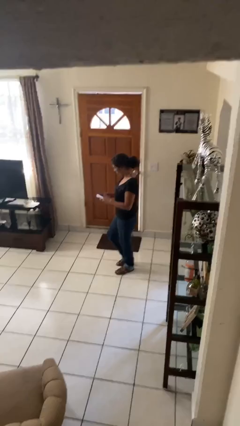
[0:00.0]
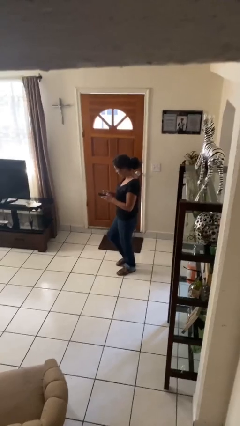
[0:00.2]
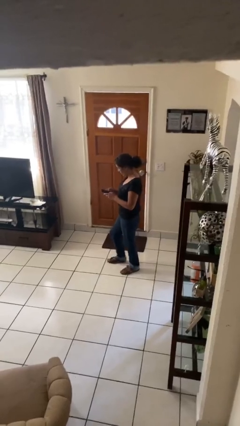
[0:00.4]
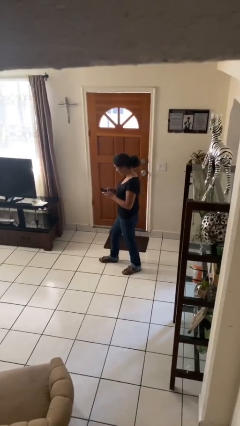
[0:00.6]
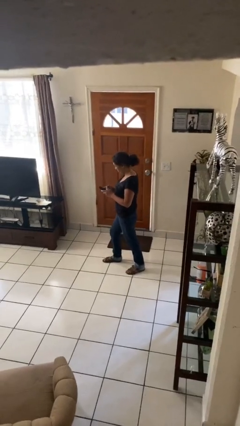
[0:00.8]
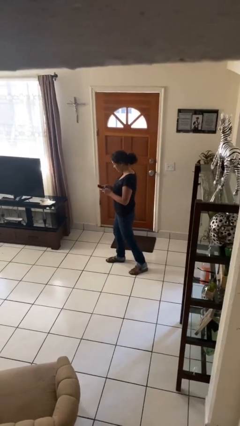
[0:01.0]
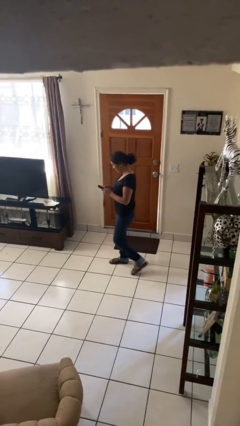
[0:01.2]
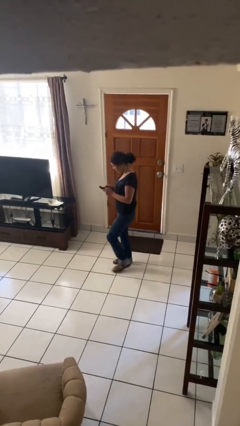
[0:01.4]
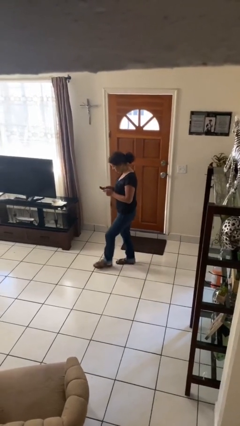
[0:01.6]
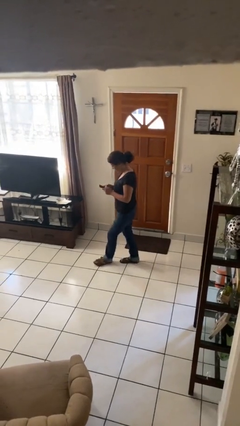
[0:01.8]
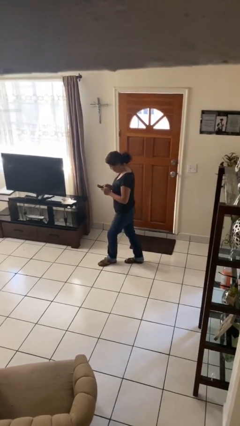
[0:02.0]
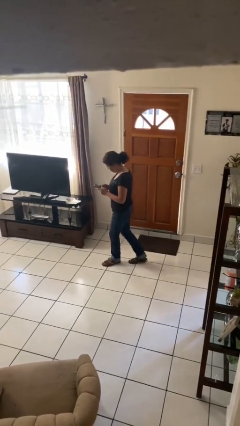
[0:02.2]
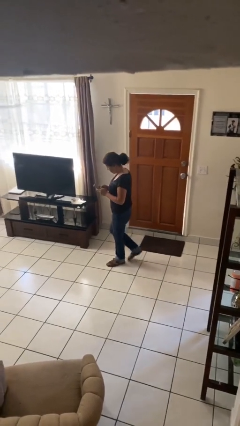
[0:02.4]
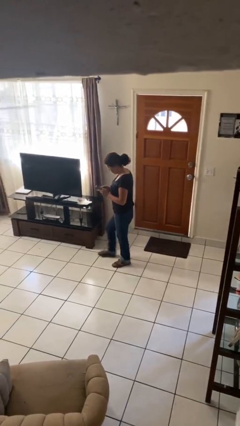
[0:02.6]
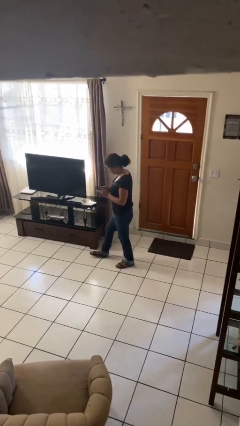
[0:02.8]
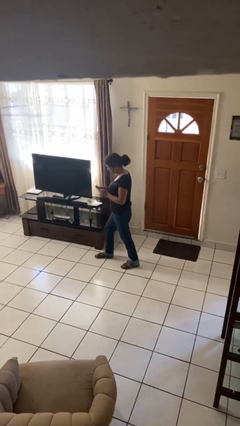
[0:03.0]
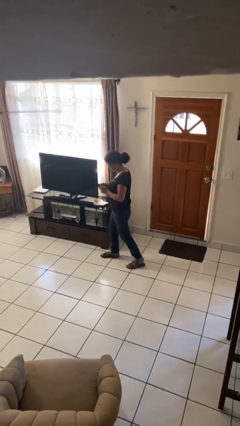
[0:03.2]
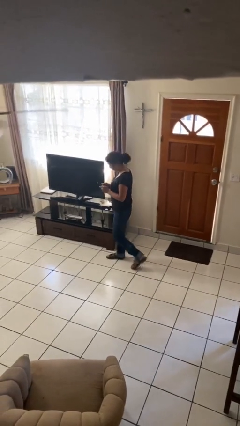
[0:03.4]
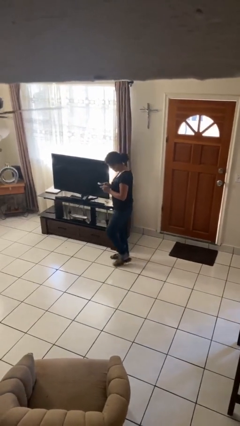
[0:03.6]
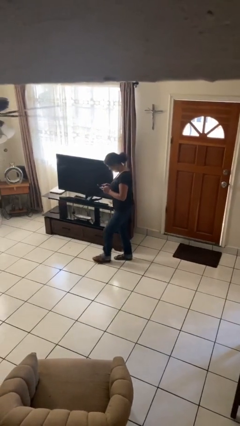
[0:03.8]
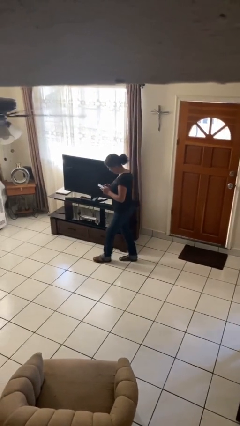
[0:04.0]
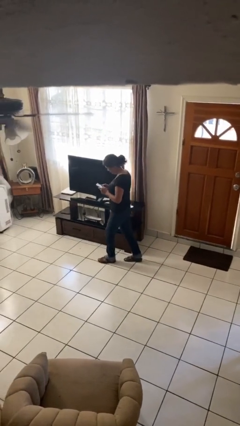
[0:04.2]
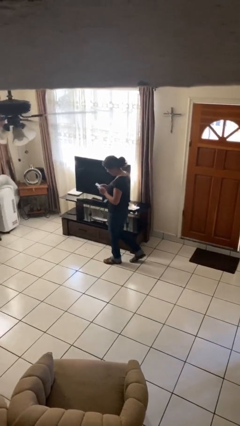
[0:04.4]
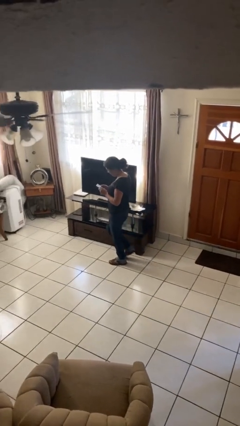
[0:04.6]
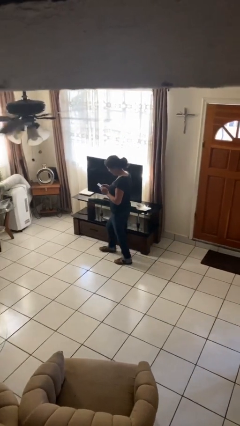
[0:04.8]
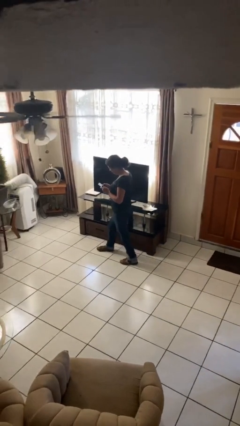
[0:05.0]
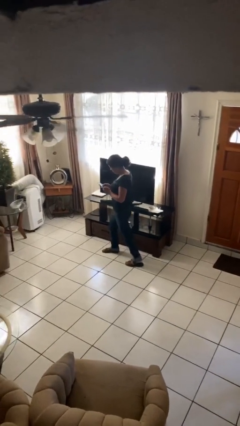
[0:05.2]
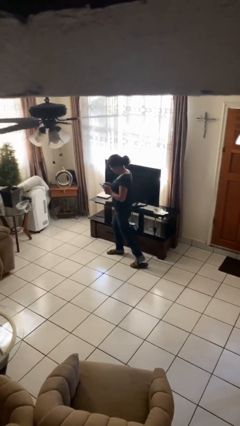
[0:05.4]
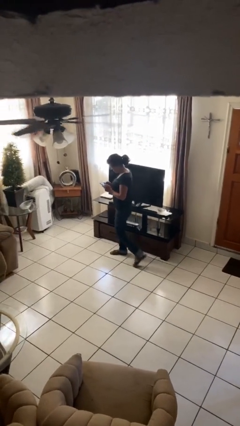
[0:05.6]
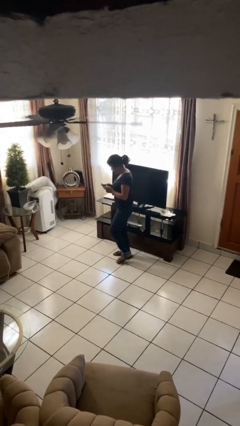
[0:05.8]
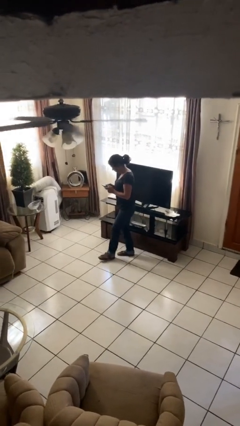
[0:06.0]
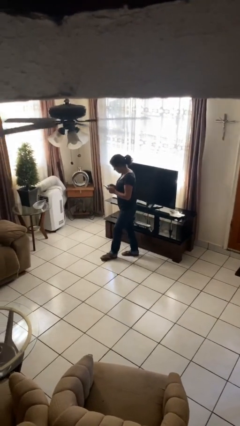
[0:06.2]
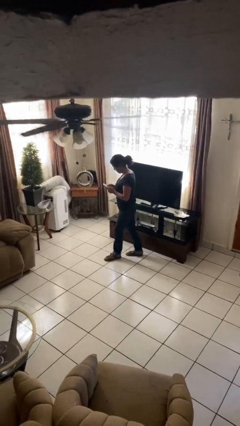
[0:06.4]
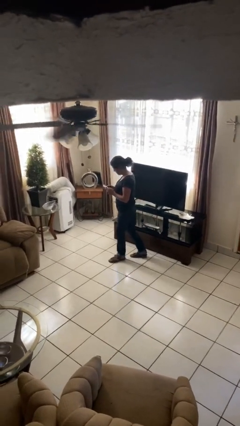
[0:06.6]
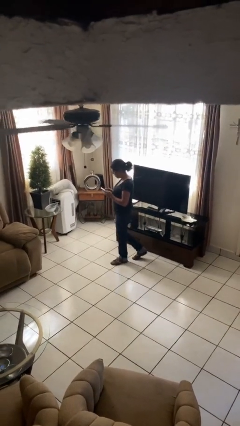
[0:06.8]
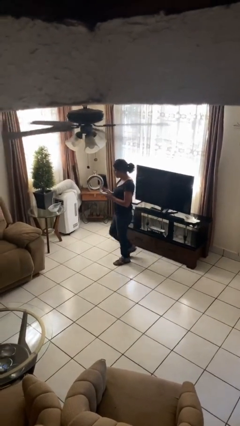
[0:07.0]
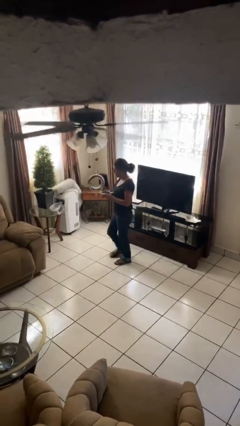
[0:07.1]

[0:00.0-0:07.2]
person texts on phone

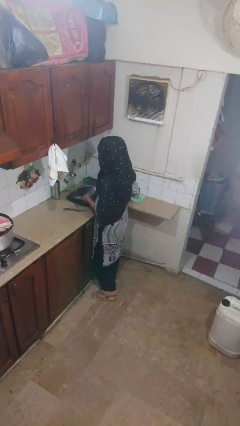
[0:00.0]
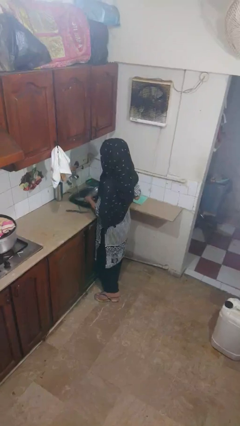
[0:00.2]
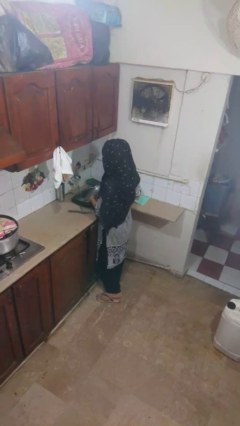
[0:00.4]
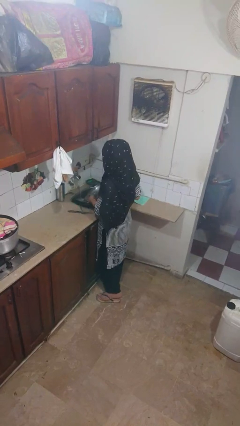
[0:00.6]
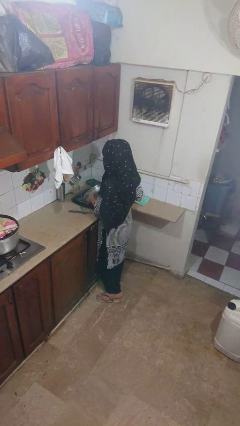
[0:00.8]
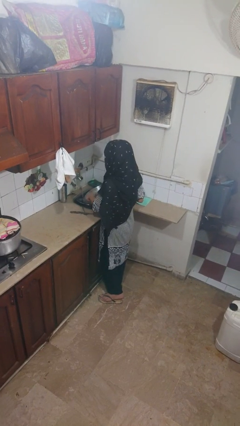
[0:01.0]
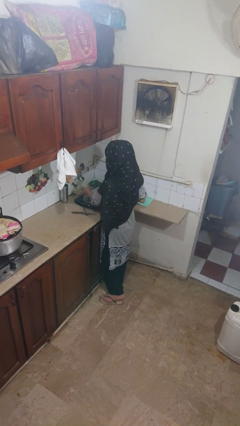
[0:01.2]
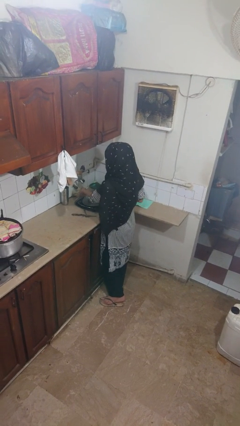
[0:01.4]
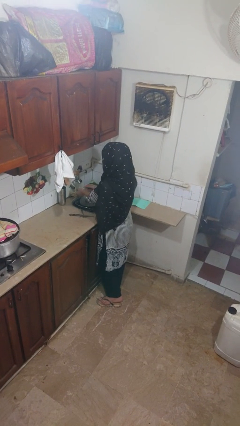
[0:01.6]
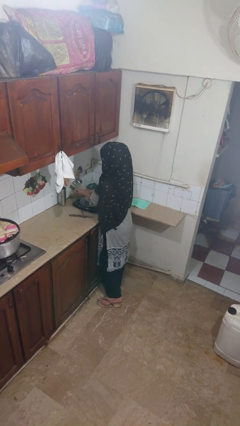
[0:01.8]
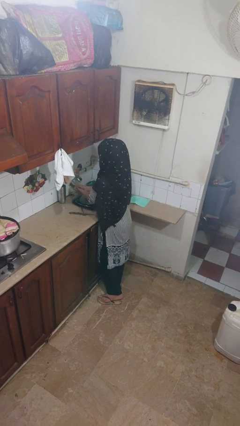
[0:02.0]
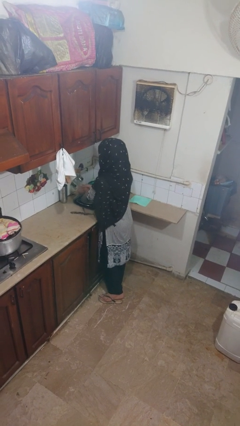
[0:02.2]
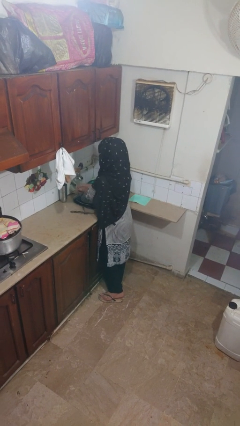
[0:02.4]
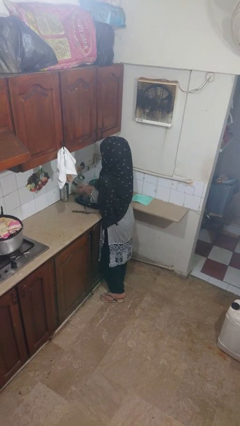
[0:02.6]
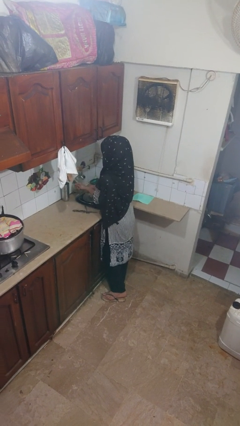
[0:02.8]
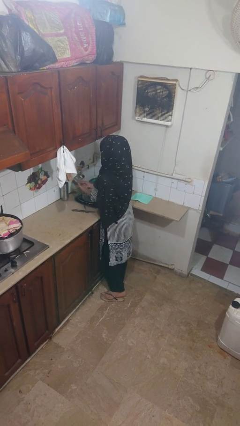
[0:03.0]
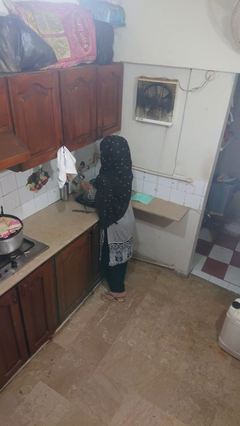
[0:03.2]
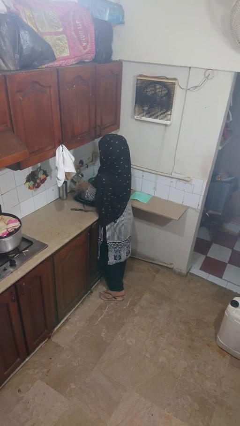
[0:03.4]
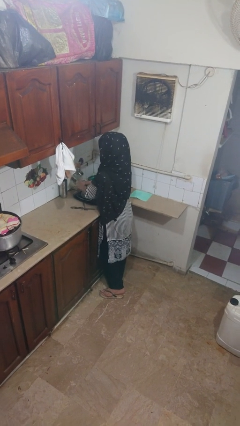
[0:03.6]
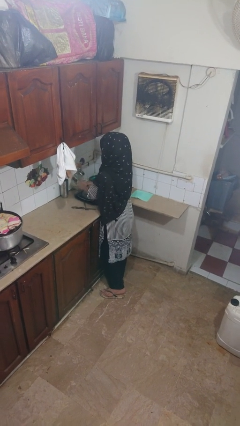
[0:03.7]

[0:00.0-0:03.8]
person washes hands

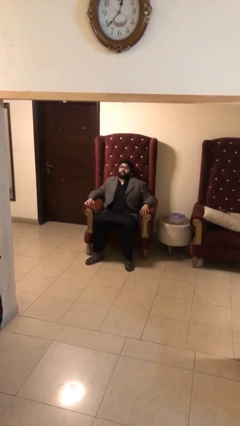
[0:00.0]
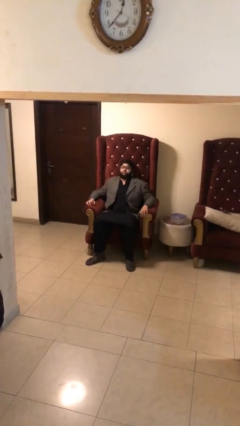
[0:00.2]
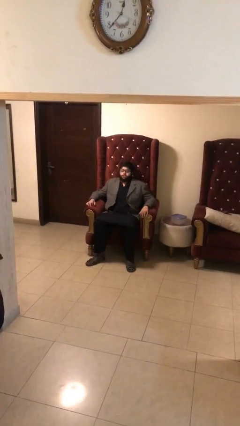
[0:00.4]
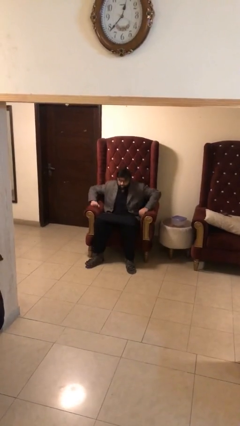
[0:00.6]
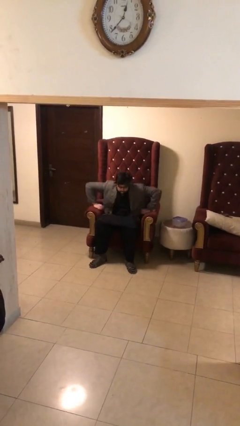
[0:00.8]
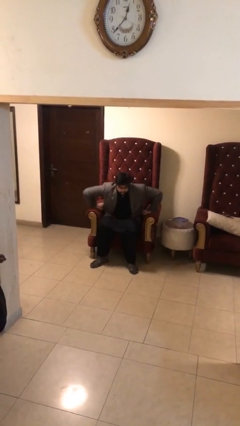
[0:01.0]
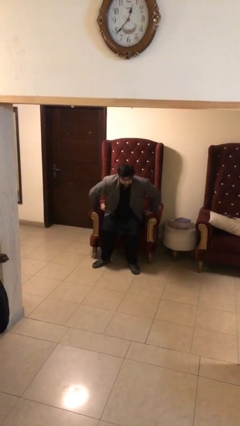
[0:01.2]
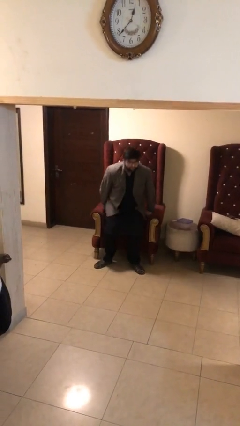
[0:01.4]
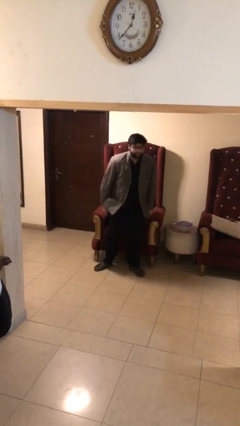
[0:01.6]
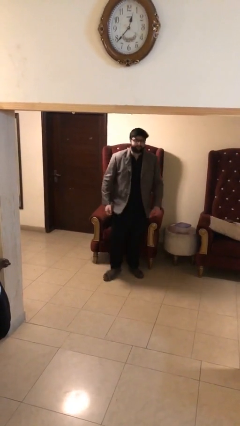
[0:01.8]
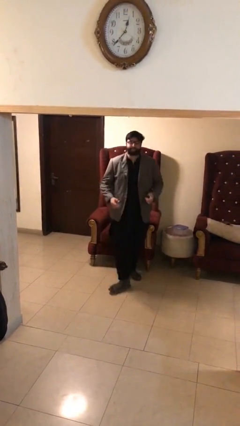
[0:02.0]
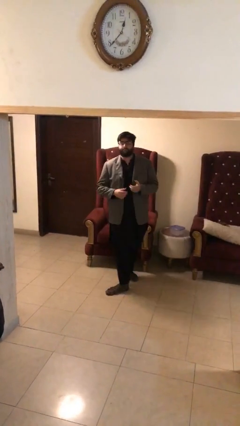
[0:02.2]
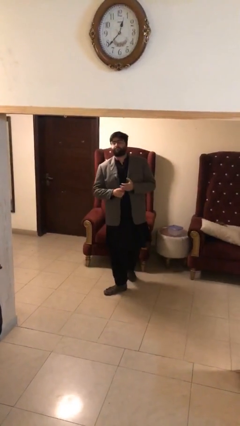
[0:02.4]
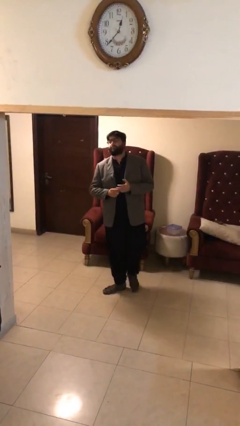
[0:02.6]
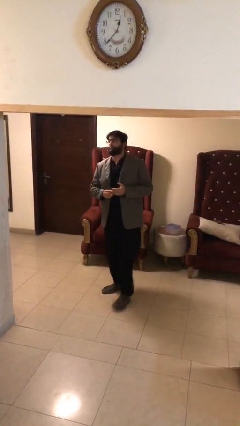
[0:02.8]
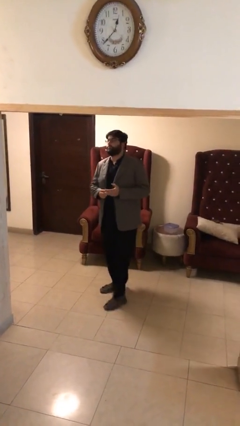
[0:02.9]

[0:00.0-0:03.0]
person stands up

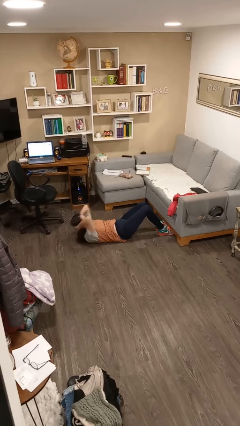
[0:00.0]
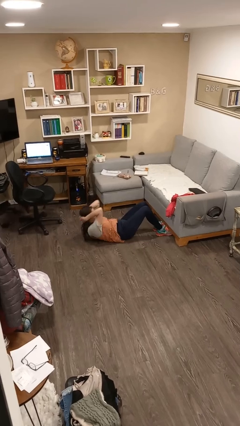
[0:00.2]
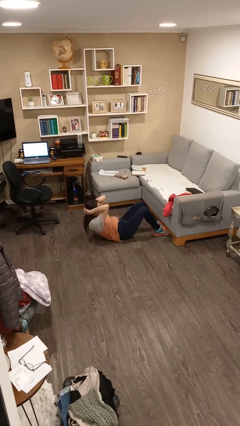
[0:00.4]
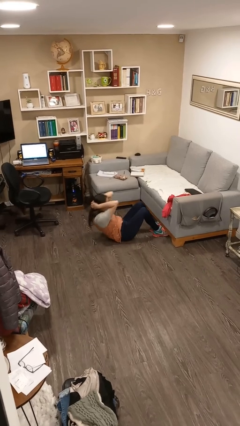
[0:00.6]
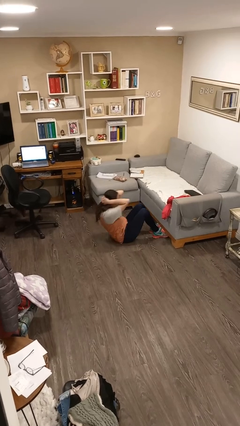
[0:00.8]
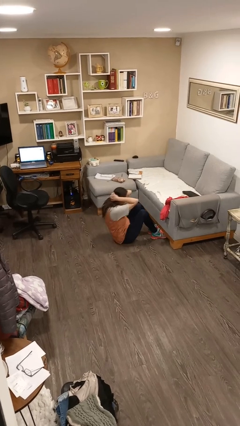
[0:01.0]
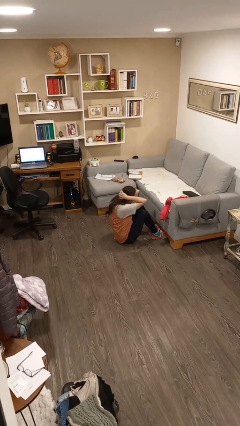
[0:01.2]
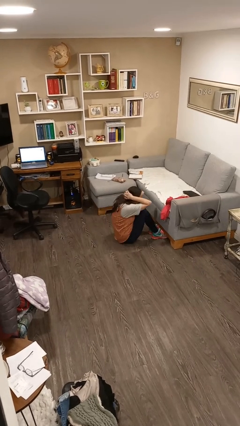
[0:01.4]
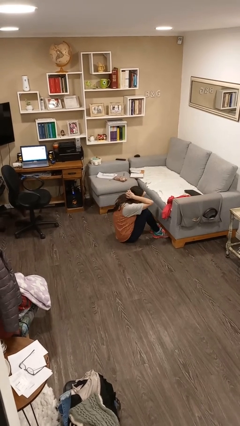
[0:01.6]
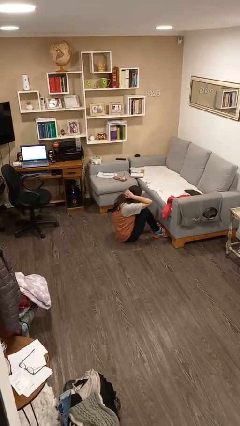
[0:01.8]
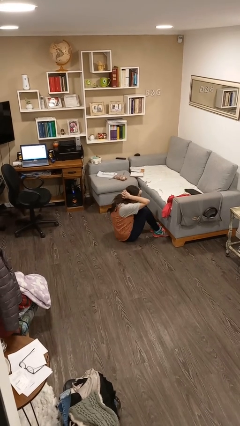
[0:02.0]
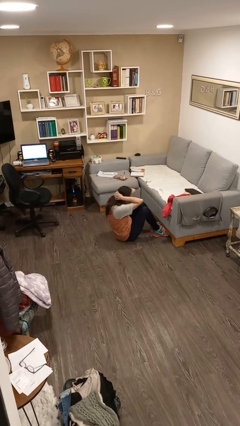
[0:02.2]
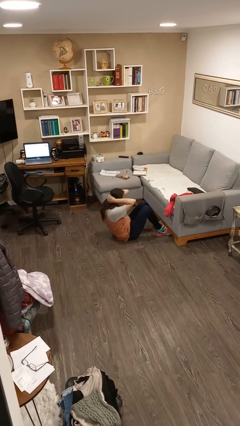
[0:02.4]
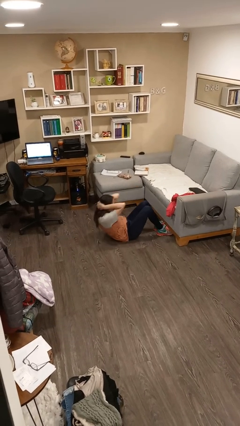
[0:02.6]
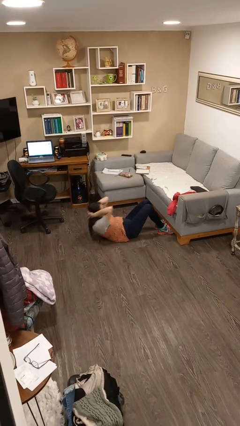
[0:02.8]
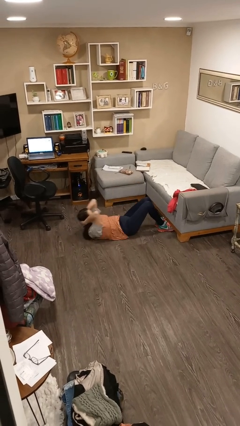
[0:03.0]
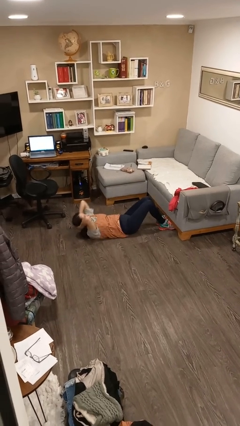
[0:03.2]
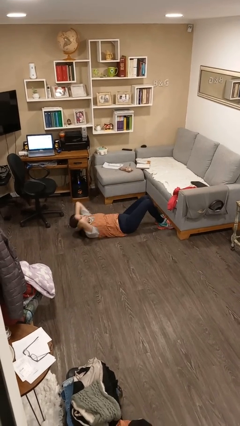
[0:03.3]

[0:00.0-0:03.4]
person exercises with situp

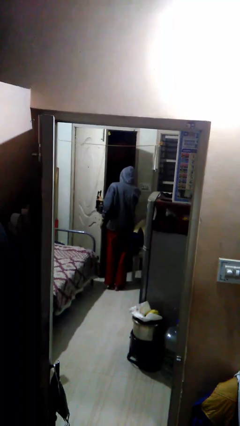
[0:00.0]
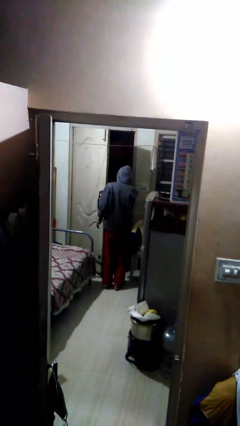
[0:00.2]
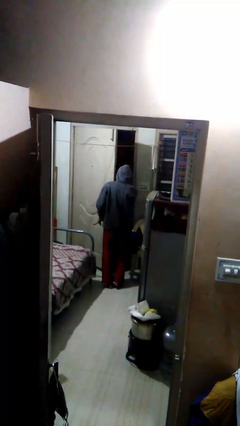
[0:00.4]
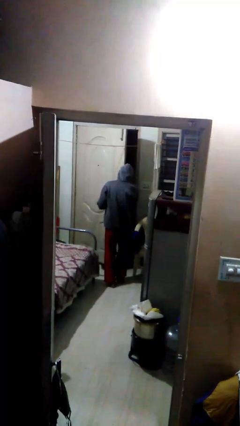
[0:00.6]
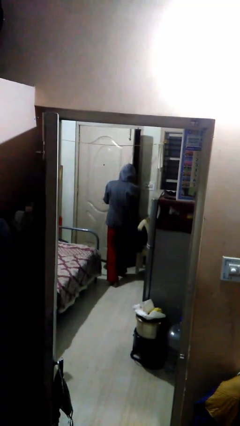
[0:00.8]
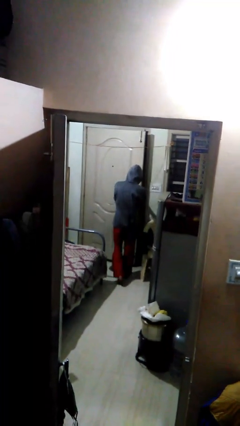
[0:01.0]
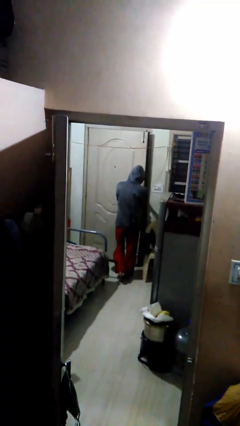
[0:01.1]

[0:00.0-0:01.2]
person closes facility door
